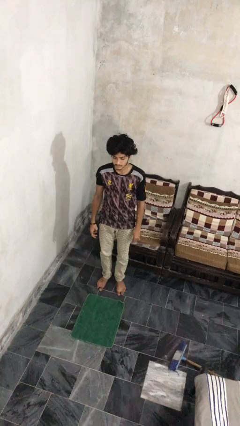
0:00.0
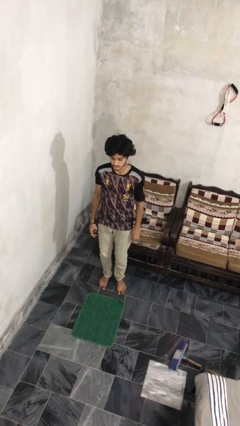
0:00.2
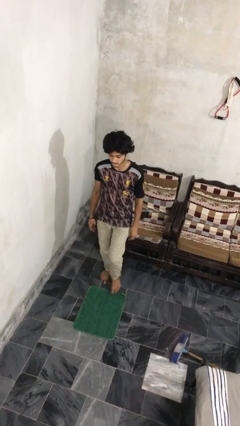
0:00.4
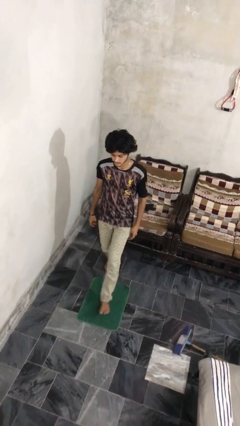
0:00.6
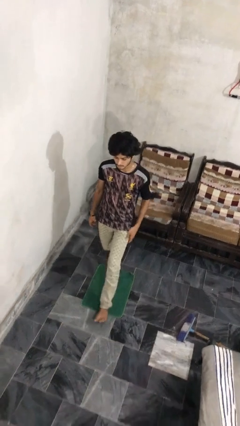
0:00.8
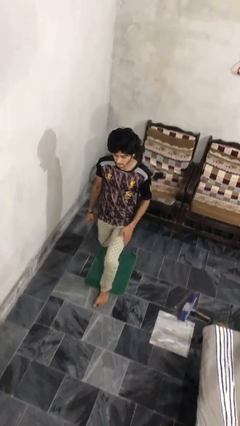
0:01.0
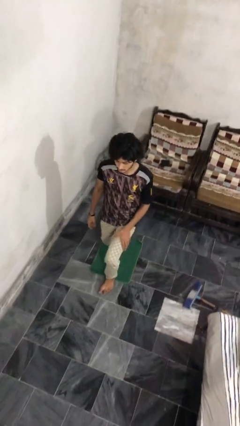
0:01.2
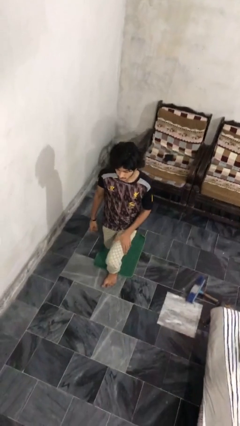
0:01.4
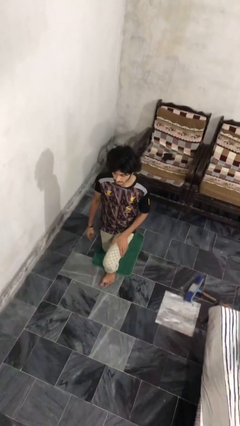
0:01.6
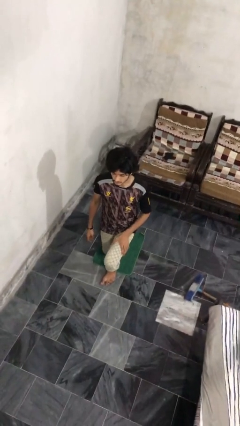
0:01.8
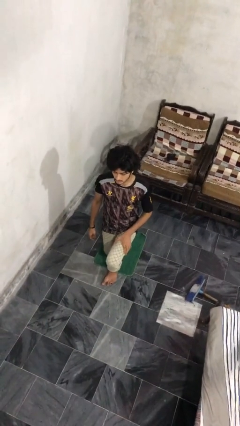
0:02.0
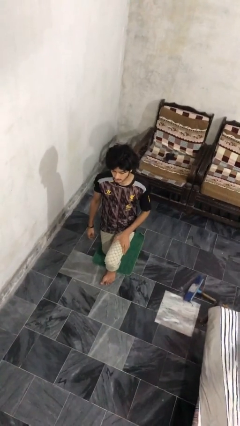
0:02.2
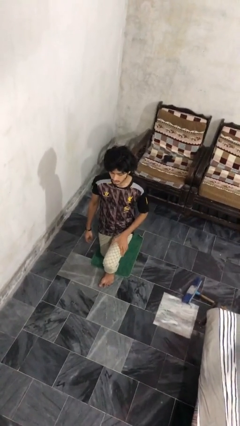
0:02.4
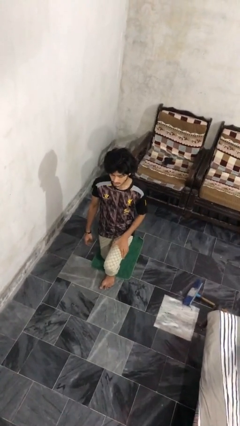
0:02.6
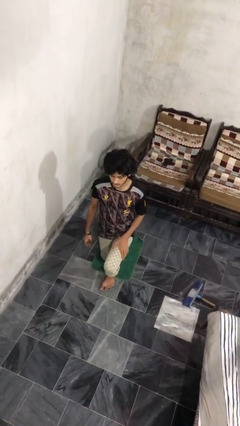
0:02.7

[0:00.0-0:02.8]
person kneels

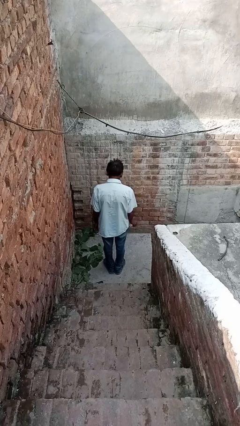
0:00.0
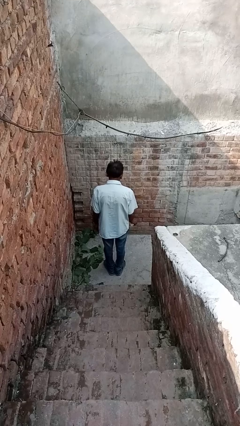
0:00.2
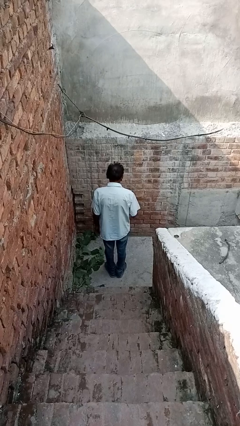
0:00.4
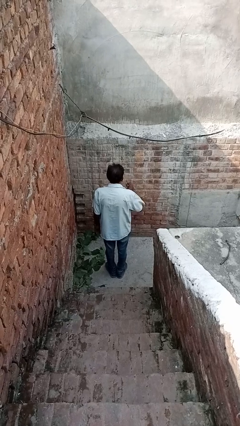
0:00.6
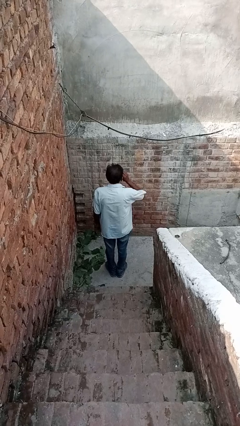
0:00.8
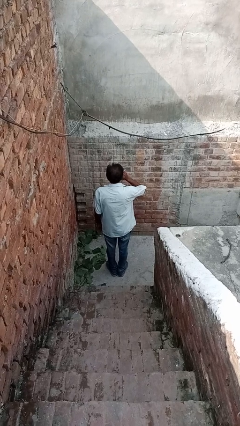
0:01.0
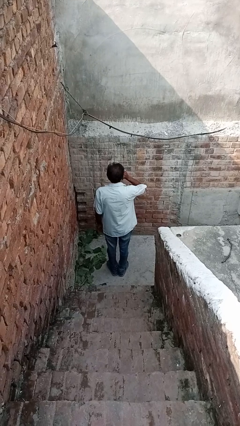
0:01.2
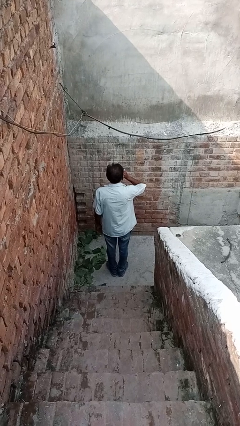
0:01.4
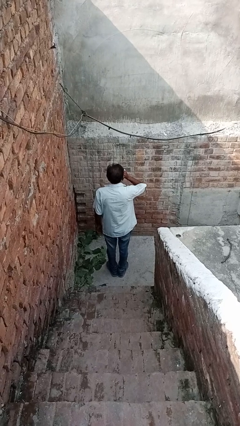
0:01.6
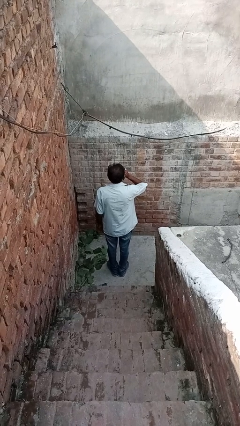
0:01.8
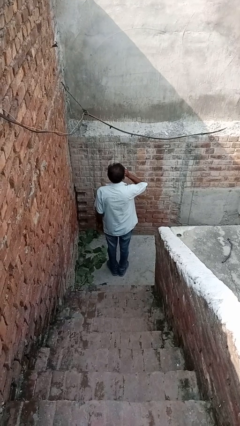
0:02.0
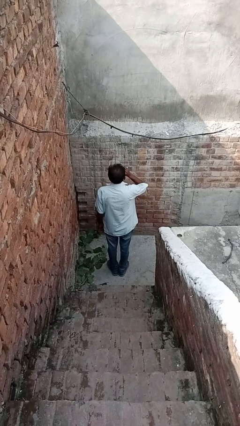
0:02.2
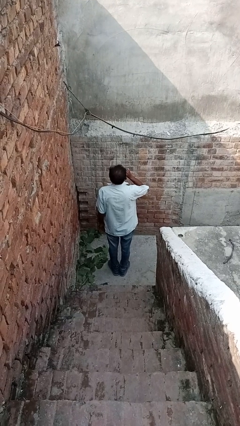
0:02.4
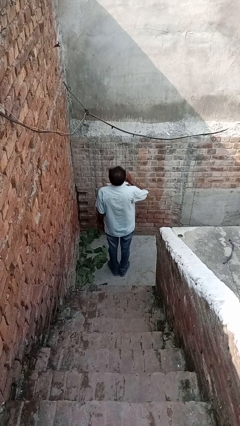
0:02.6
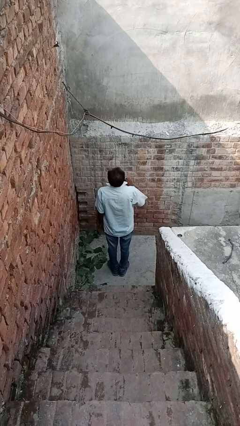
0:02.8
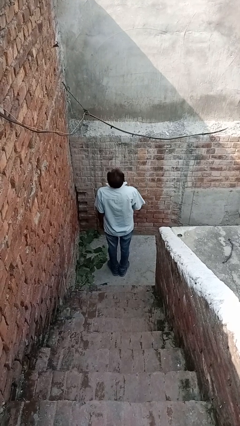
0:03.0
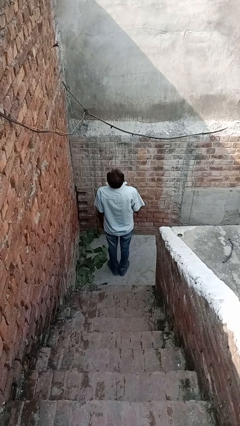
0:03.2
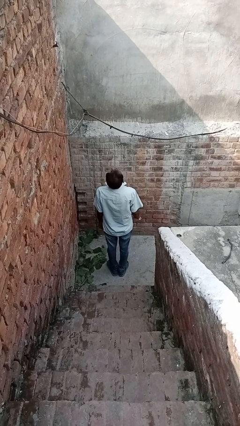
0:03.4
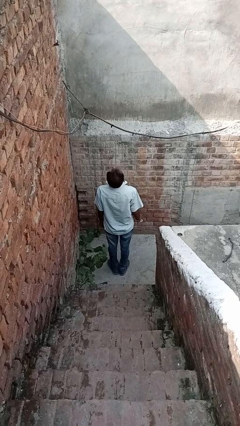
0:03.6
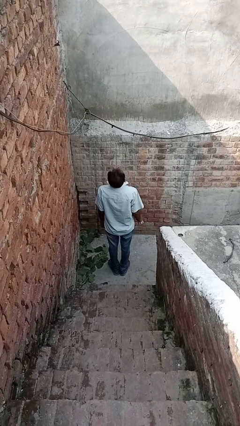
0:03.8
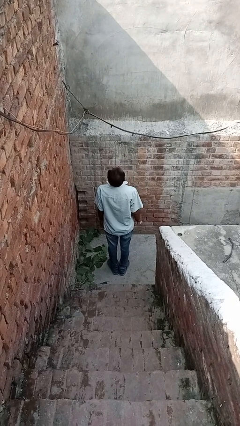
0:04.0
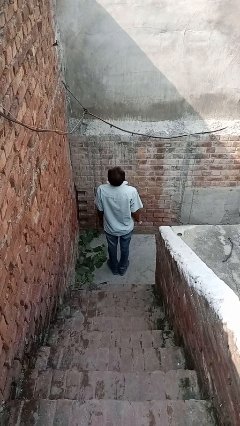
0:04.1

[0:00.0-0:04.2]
person vapes

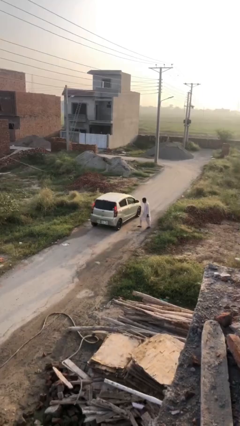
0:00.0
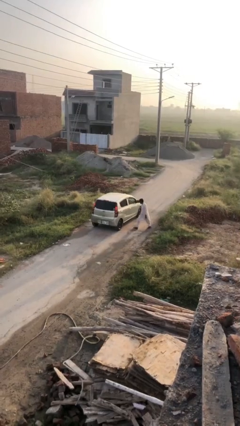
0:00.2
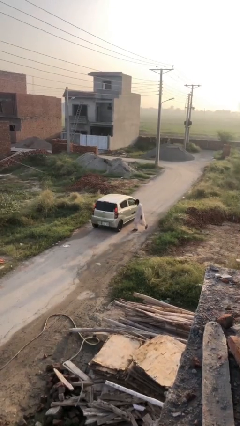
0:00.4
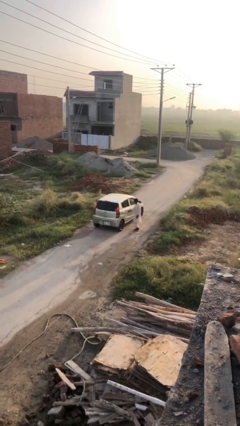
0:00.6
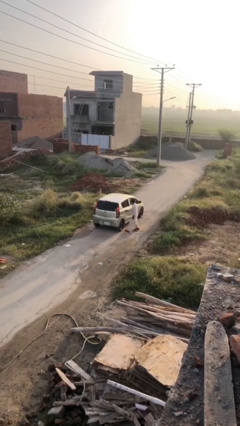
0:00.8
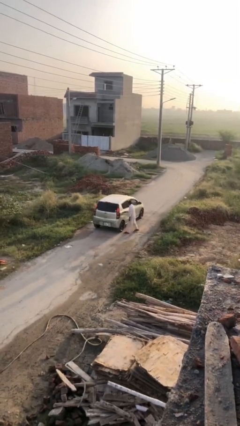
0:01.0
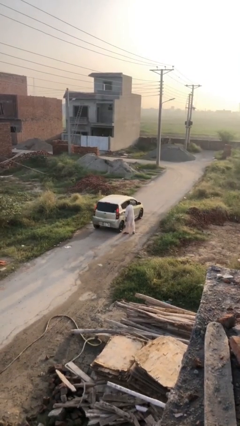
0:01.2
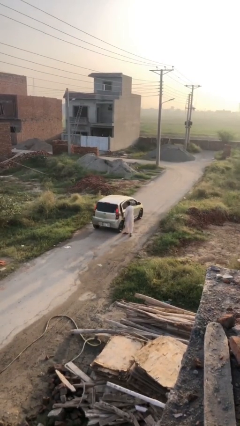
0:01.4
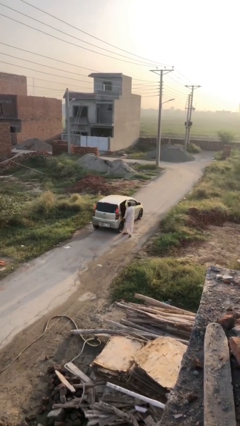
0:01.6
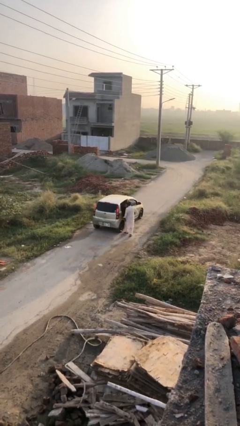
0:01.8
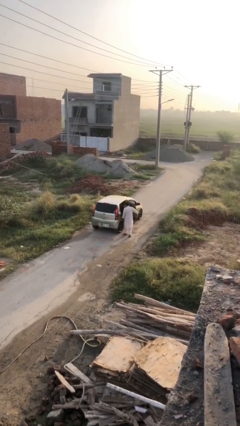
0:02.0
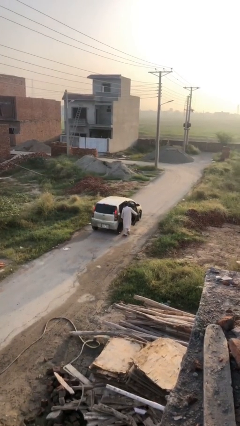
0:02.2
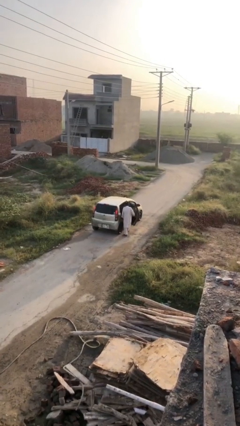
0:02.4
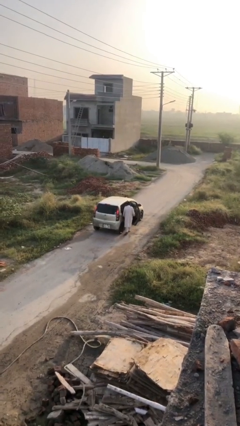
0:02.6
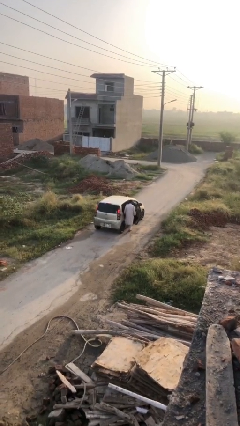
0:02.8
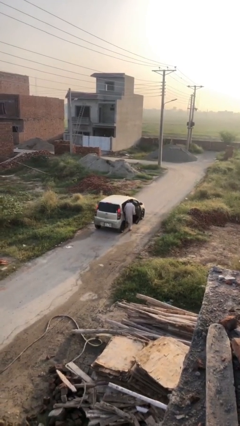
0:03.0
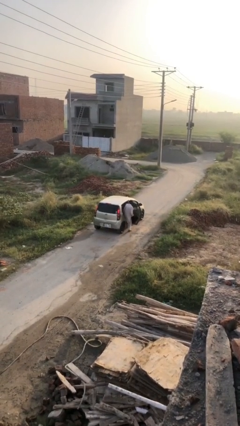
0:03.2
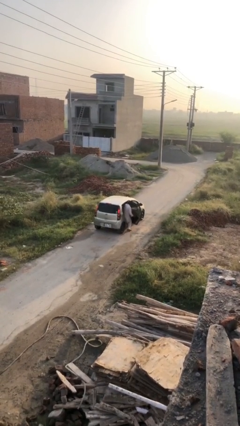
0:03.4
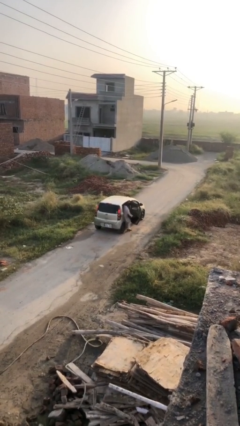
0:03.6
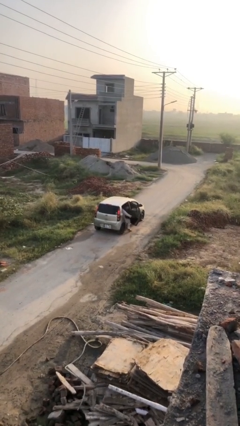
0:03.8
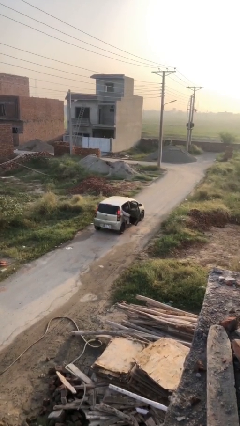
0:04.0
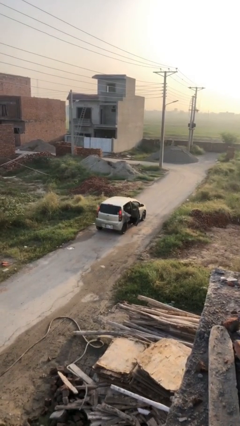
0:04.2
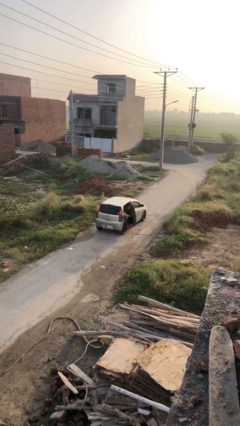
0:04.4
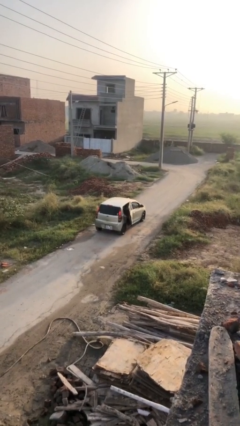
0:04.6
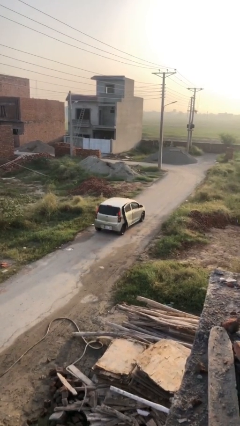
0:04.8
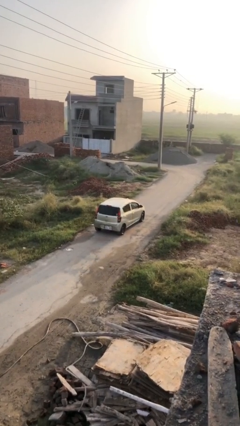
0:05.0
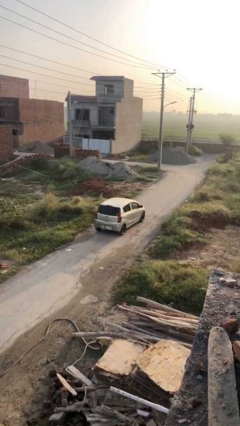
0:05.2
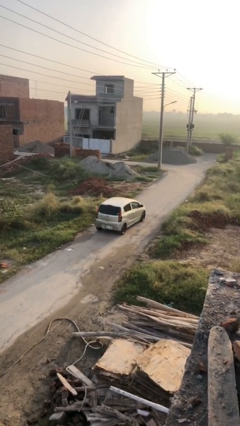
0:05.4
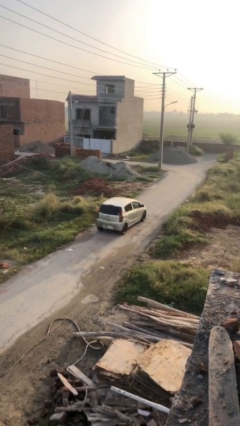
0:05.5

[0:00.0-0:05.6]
car picks up person

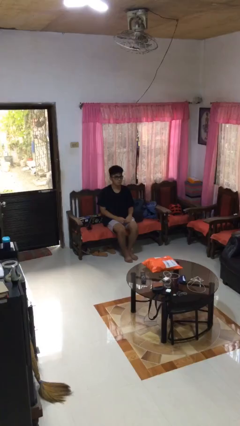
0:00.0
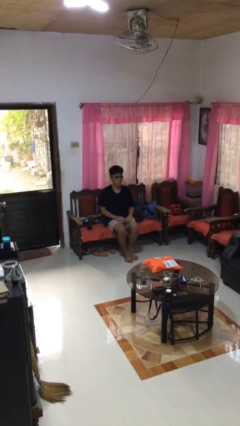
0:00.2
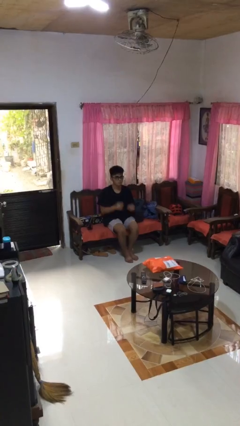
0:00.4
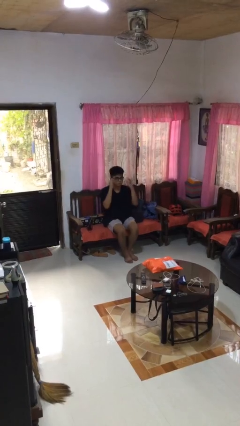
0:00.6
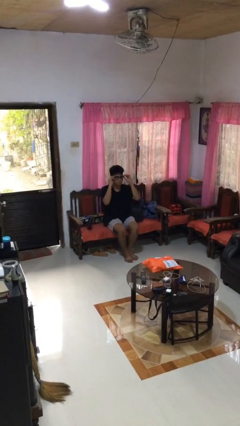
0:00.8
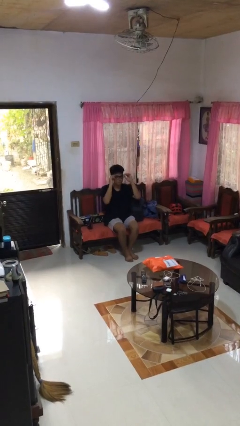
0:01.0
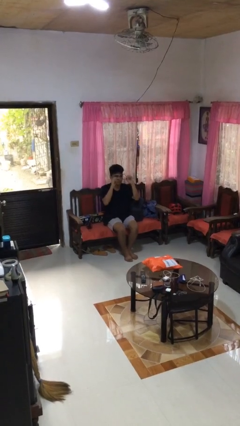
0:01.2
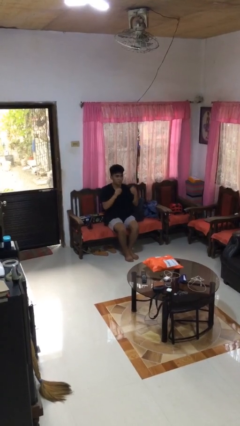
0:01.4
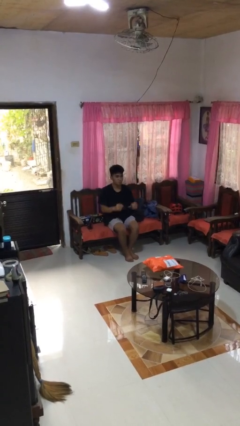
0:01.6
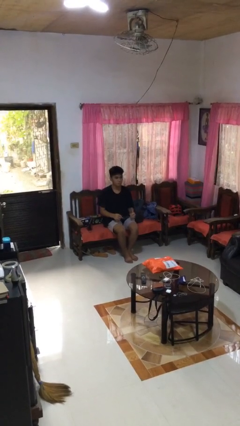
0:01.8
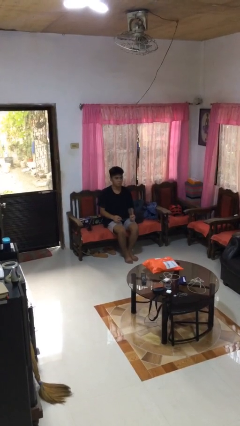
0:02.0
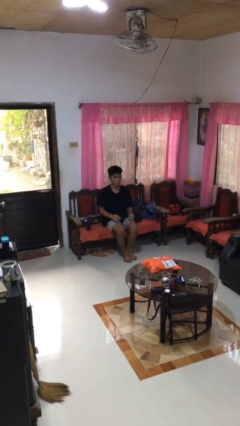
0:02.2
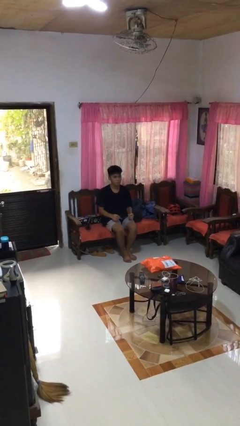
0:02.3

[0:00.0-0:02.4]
person takes off glasses

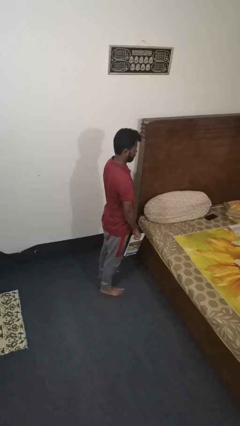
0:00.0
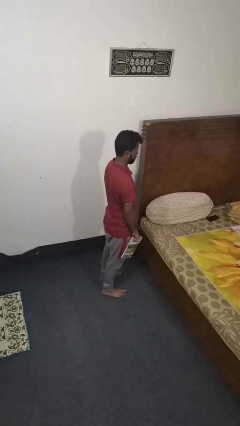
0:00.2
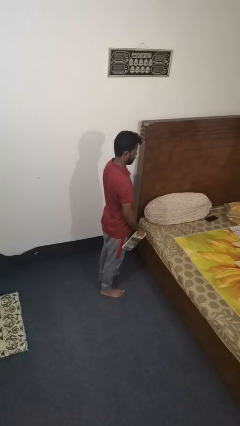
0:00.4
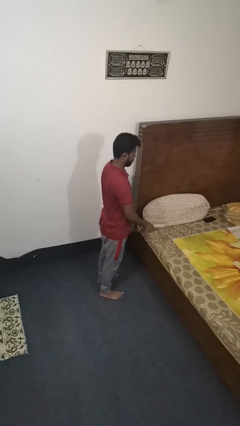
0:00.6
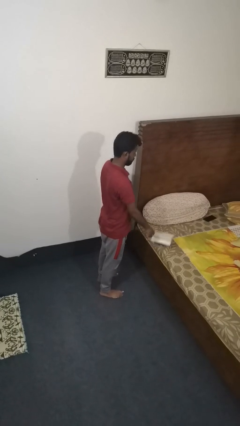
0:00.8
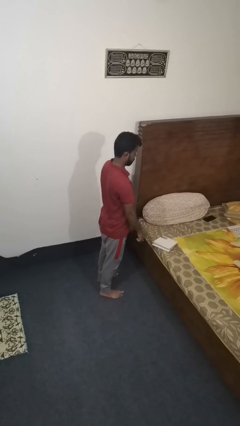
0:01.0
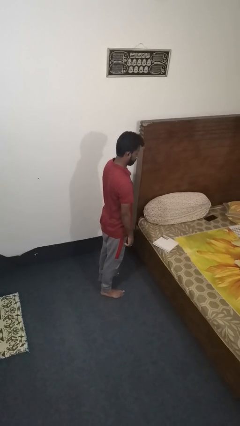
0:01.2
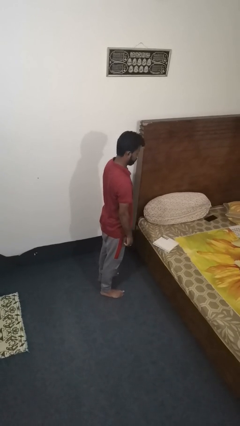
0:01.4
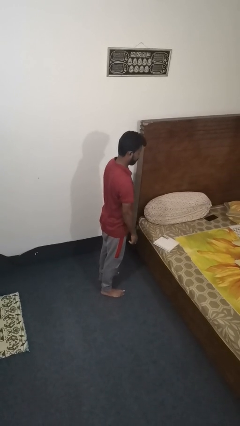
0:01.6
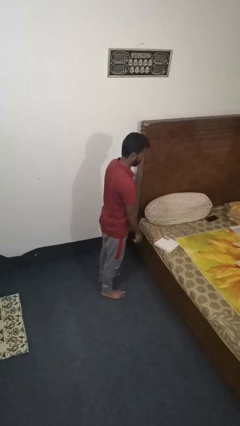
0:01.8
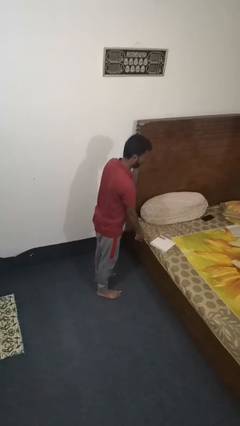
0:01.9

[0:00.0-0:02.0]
person throws object on bed

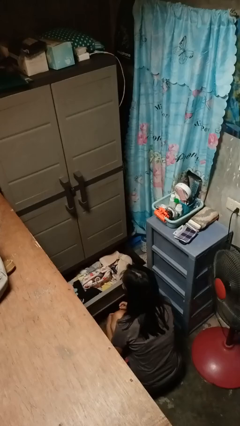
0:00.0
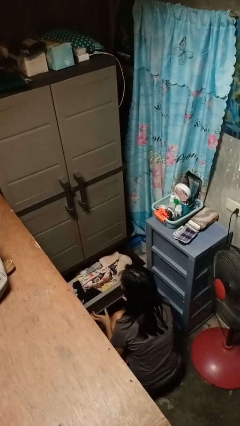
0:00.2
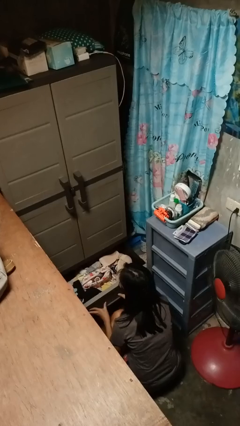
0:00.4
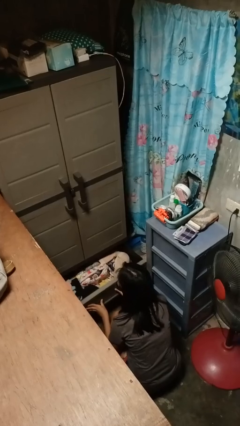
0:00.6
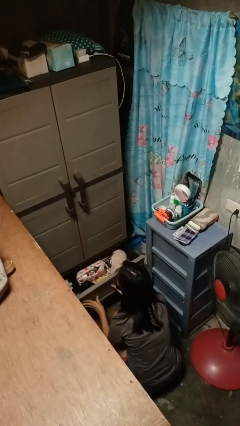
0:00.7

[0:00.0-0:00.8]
person closes dresser drawer

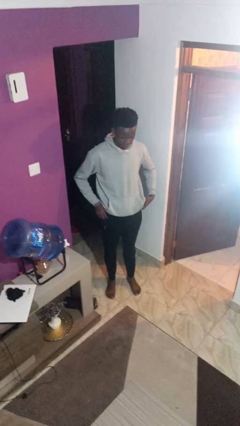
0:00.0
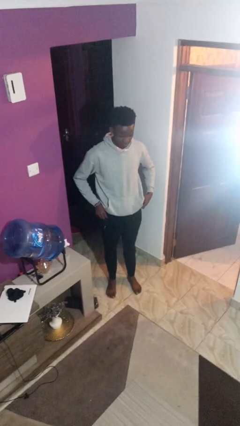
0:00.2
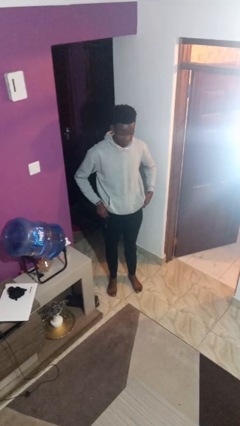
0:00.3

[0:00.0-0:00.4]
person takes off pants
